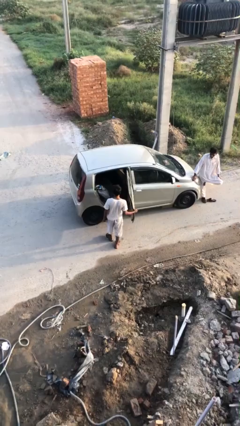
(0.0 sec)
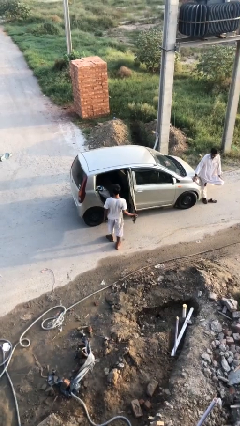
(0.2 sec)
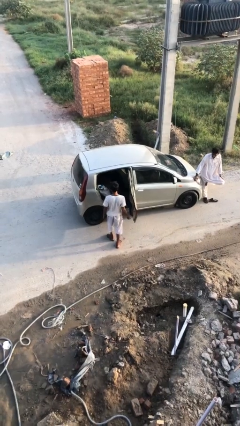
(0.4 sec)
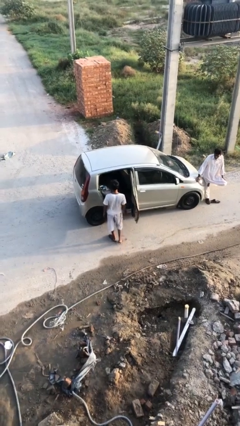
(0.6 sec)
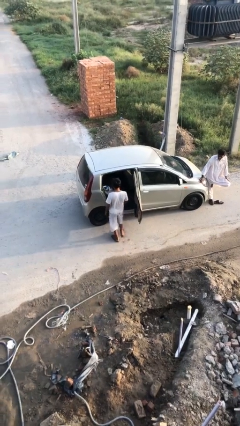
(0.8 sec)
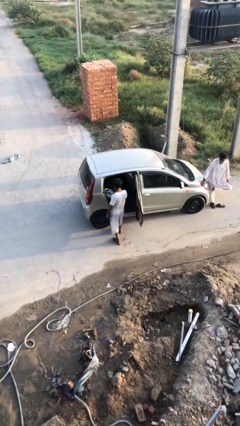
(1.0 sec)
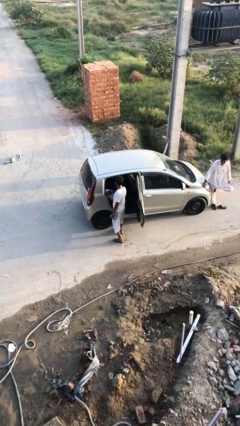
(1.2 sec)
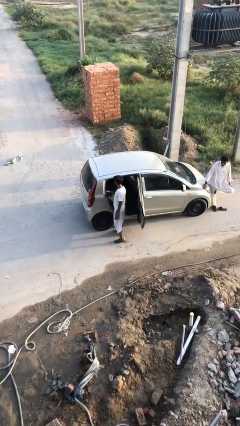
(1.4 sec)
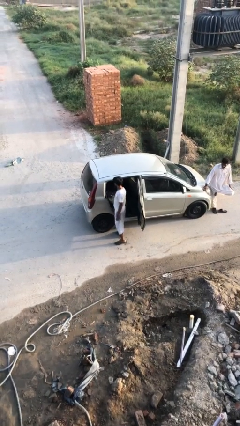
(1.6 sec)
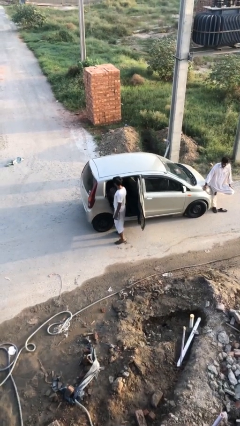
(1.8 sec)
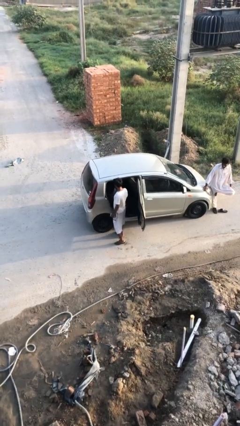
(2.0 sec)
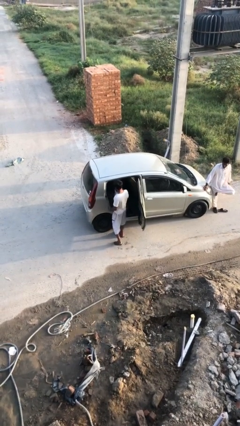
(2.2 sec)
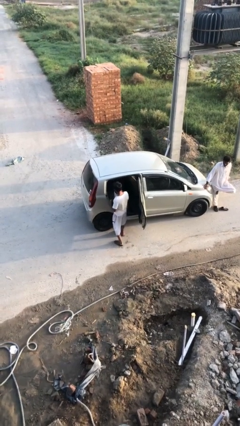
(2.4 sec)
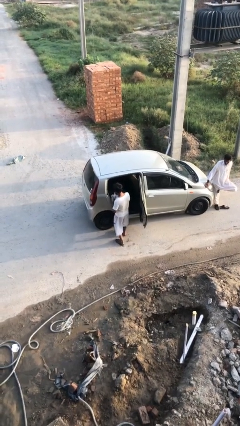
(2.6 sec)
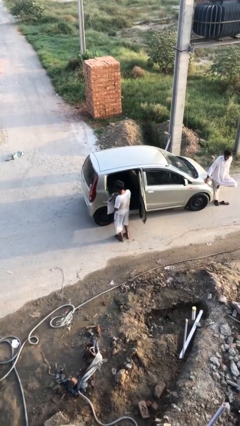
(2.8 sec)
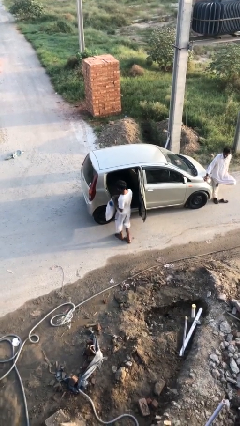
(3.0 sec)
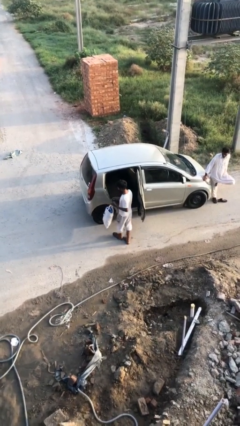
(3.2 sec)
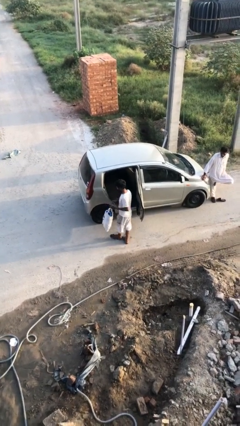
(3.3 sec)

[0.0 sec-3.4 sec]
person unloads car

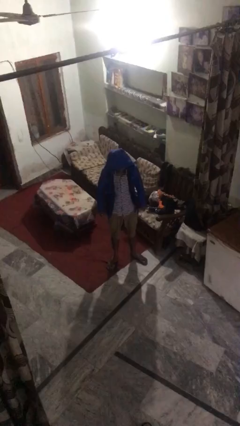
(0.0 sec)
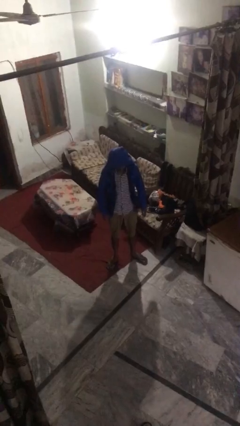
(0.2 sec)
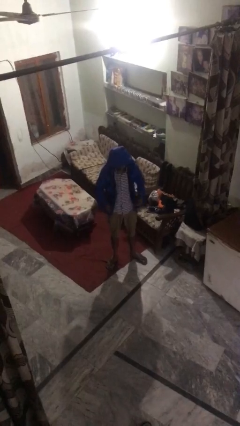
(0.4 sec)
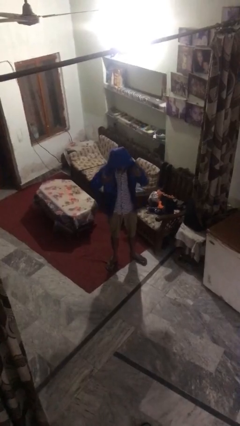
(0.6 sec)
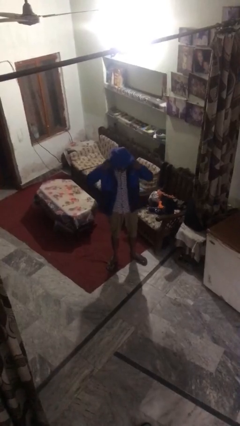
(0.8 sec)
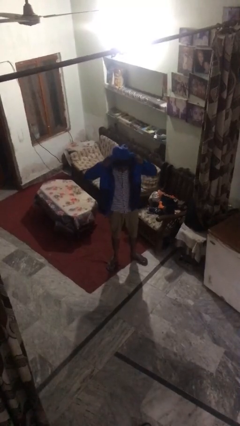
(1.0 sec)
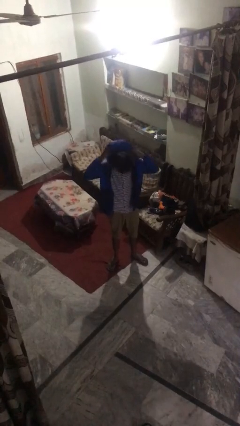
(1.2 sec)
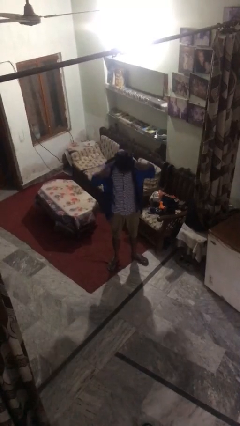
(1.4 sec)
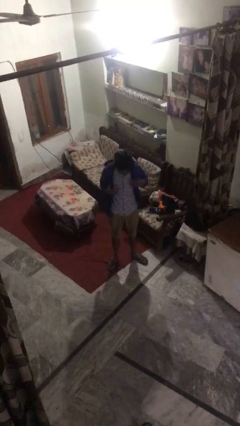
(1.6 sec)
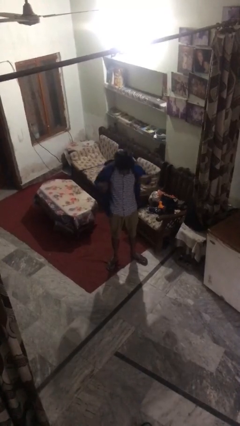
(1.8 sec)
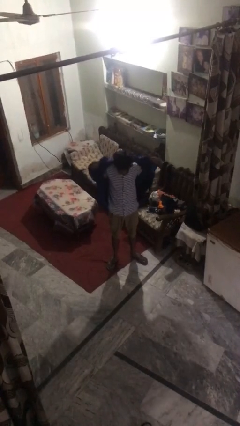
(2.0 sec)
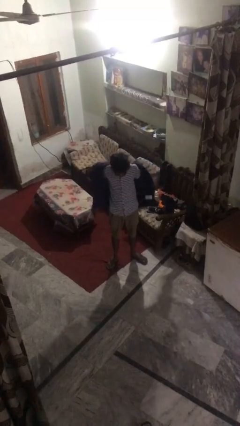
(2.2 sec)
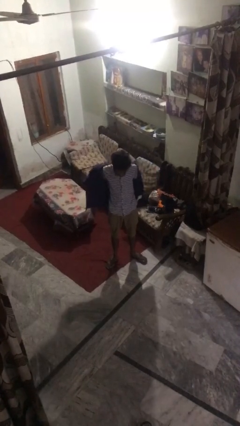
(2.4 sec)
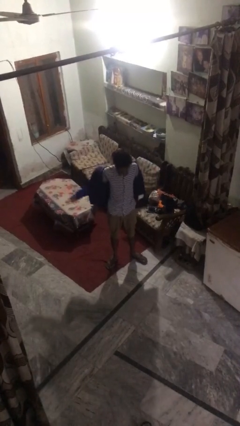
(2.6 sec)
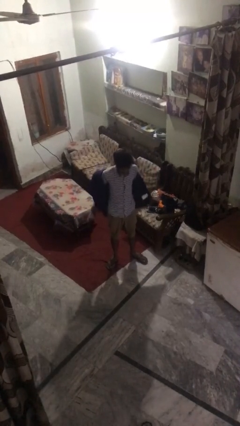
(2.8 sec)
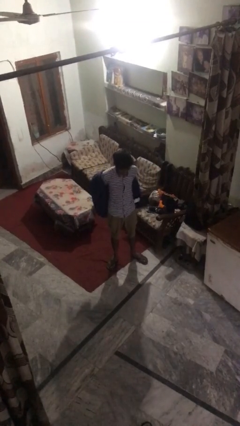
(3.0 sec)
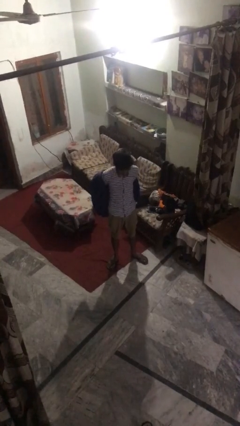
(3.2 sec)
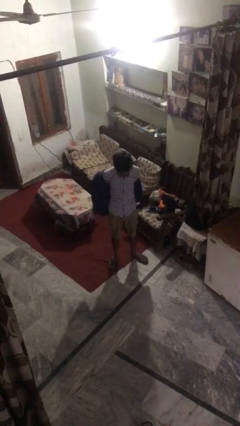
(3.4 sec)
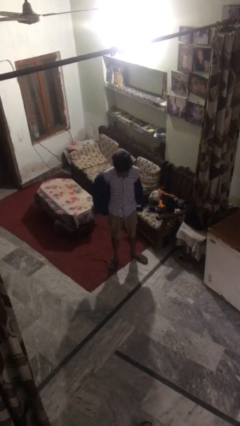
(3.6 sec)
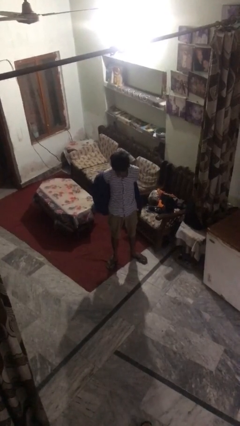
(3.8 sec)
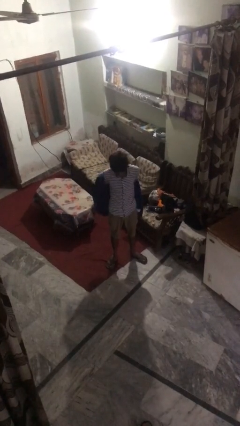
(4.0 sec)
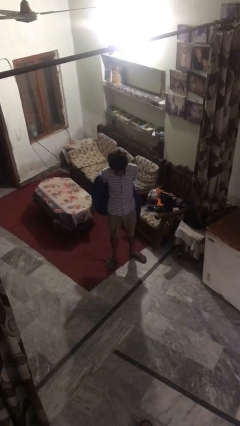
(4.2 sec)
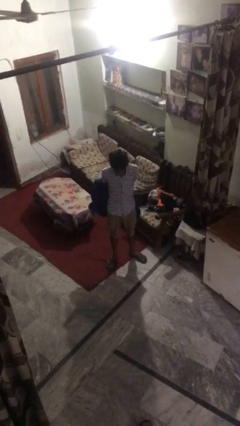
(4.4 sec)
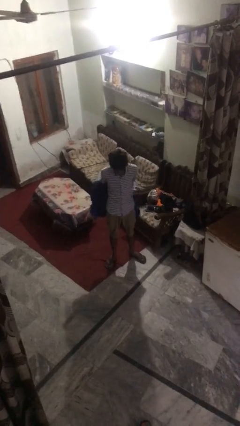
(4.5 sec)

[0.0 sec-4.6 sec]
person takes off hoodie

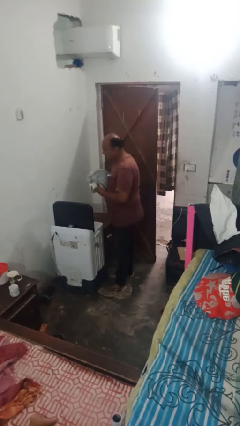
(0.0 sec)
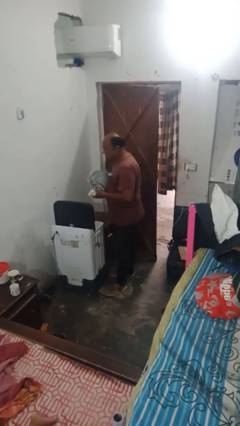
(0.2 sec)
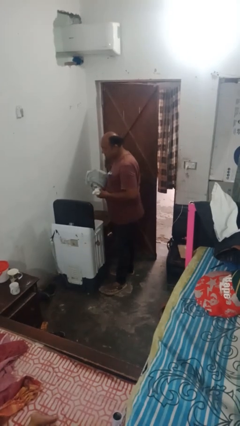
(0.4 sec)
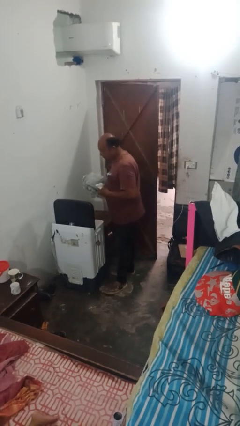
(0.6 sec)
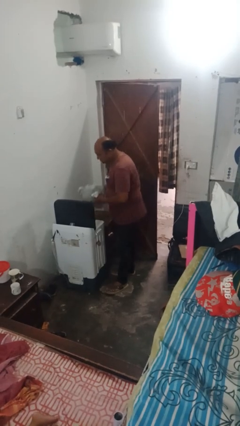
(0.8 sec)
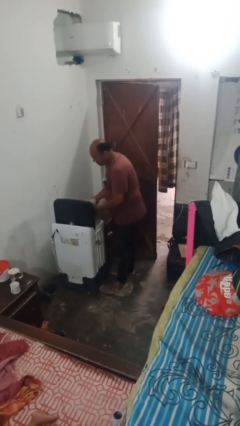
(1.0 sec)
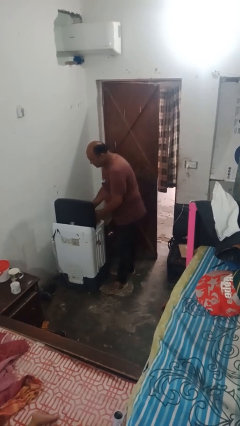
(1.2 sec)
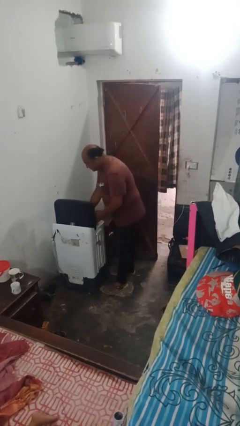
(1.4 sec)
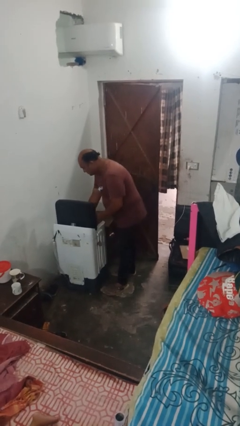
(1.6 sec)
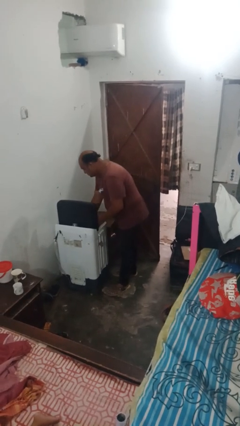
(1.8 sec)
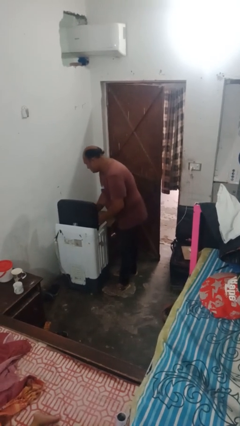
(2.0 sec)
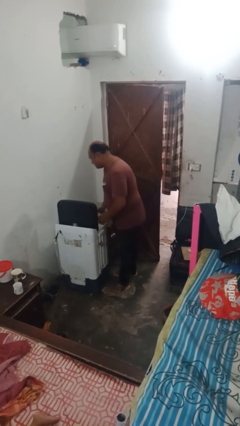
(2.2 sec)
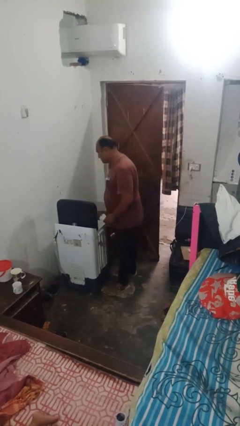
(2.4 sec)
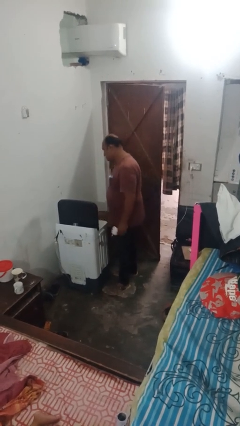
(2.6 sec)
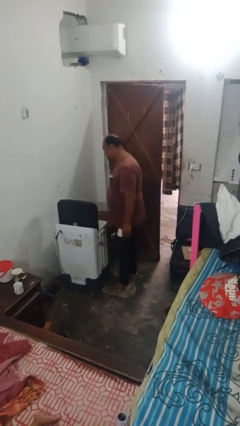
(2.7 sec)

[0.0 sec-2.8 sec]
person loads dryer

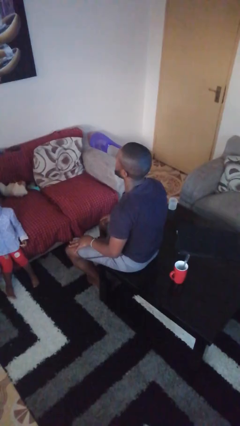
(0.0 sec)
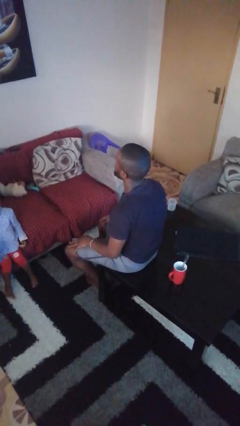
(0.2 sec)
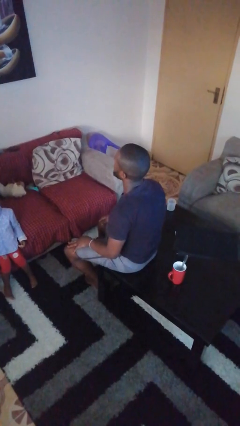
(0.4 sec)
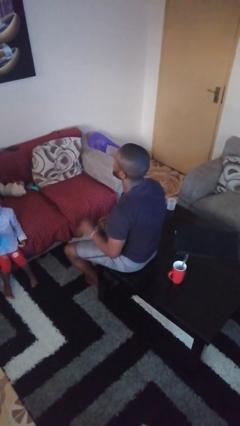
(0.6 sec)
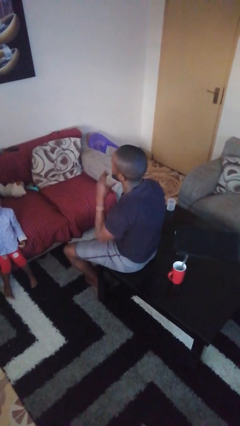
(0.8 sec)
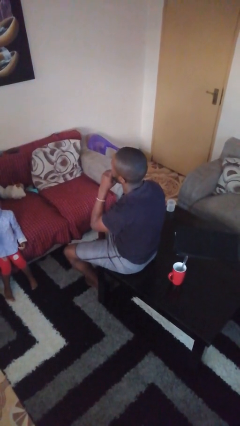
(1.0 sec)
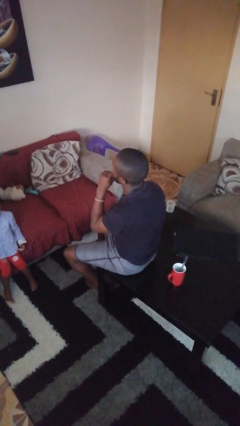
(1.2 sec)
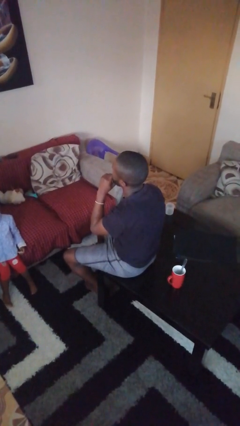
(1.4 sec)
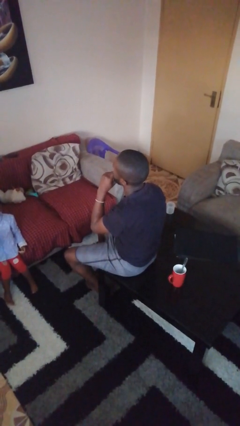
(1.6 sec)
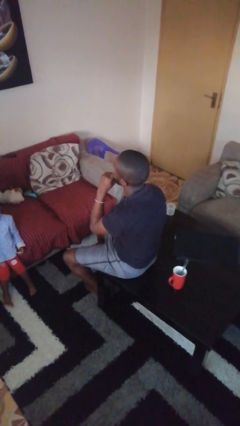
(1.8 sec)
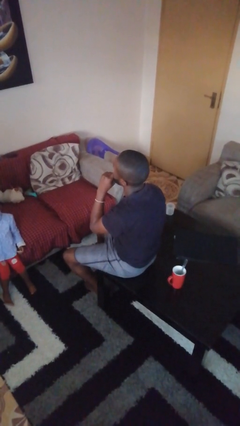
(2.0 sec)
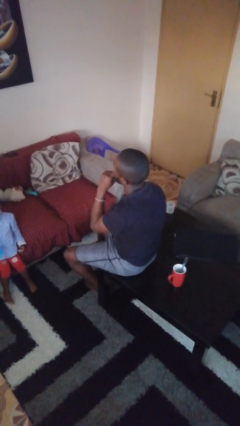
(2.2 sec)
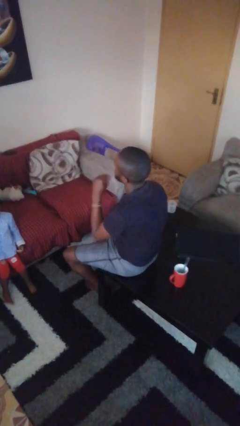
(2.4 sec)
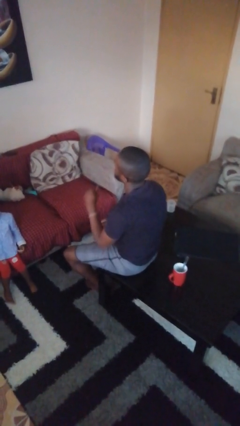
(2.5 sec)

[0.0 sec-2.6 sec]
person strokes chin

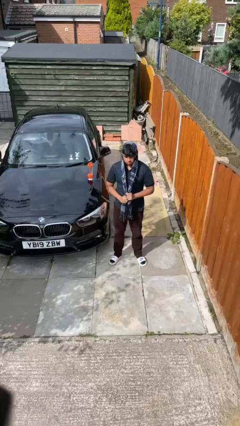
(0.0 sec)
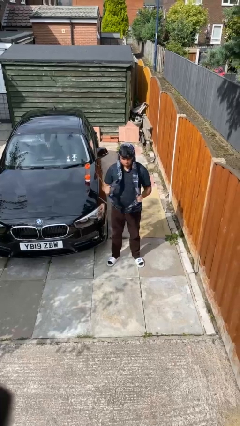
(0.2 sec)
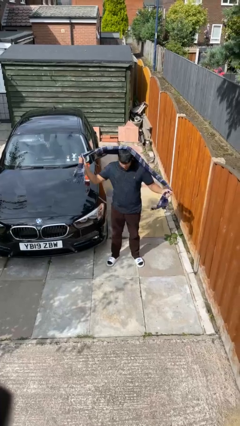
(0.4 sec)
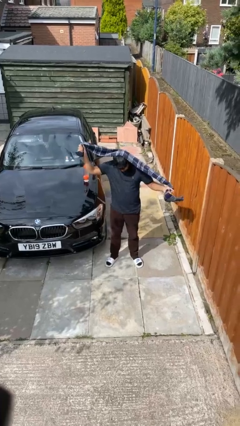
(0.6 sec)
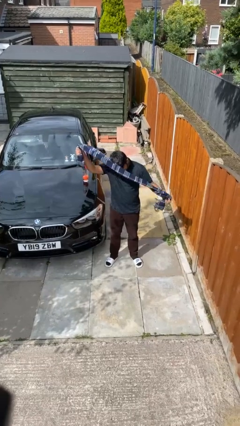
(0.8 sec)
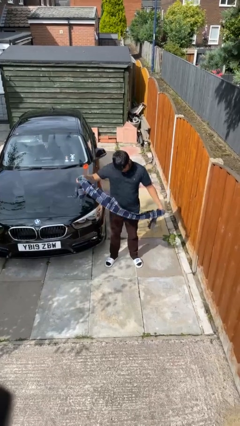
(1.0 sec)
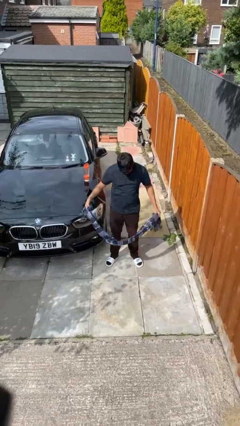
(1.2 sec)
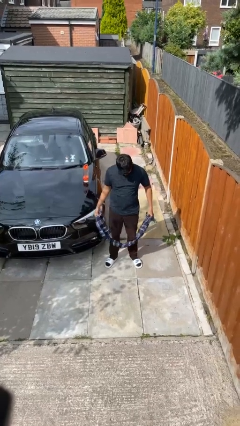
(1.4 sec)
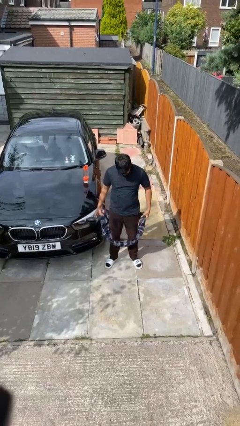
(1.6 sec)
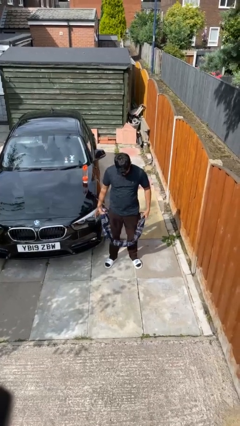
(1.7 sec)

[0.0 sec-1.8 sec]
person takes off scarf

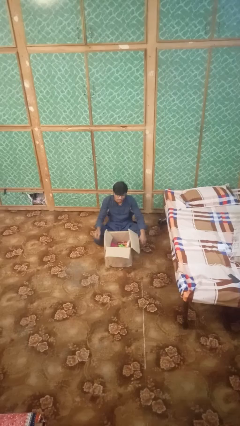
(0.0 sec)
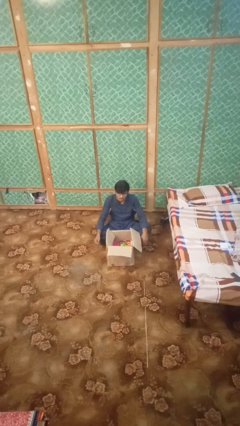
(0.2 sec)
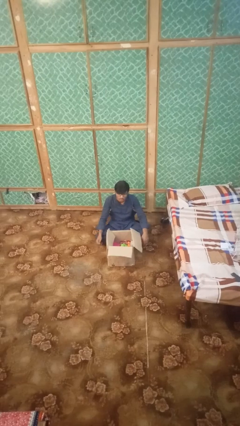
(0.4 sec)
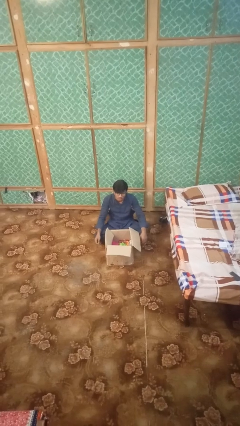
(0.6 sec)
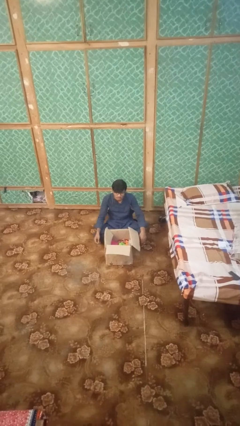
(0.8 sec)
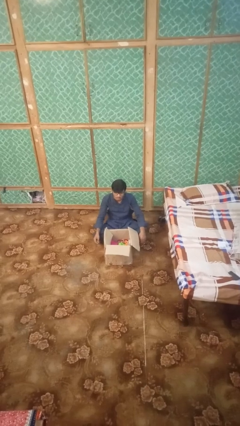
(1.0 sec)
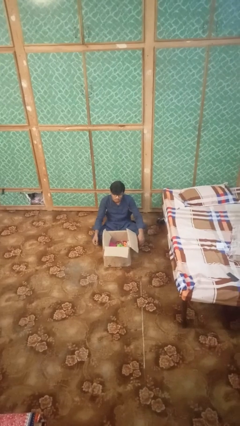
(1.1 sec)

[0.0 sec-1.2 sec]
person puts object into box

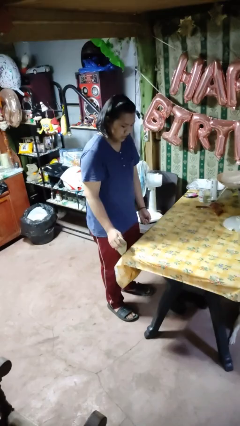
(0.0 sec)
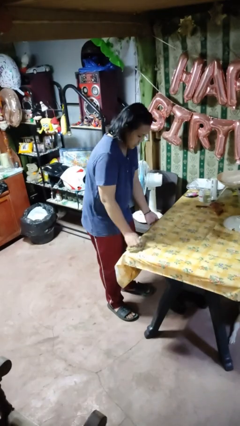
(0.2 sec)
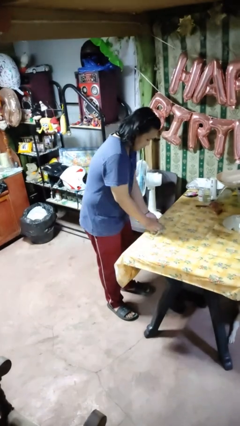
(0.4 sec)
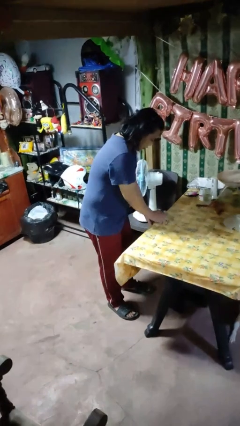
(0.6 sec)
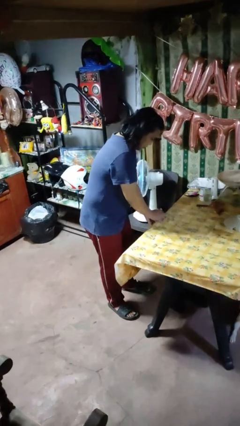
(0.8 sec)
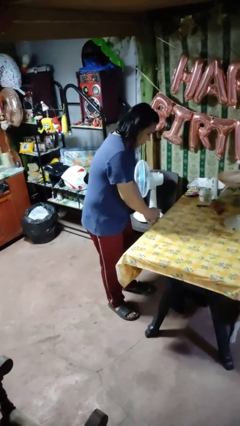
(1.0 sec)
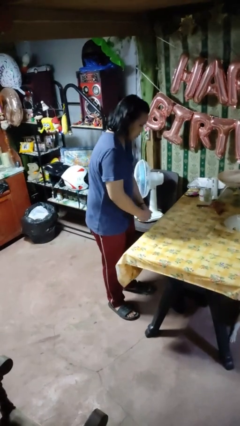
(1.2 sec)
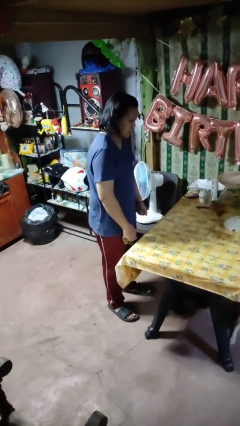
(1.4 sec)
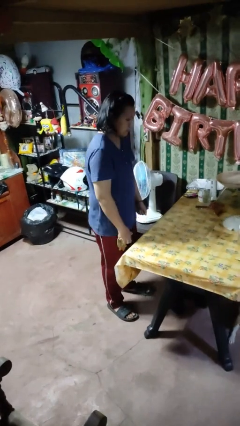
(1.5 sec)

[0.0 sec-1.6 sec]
person cleans table with rag
